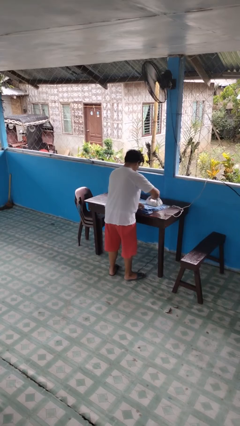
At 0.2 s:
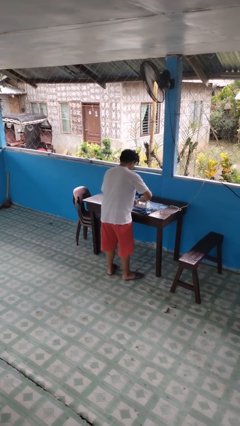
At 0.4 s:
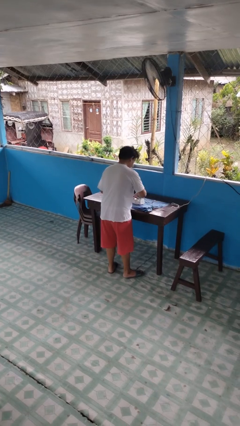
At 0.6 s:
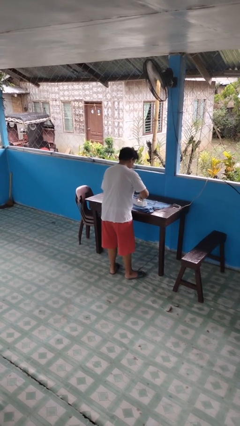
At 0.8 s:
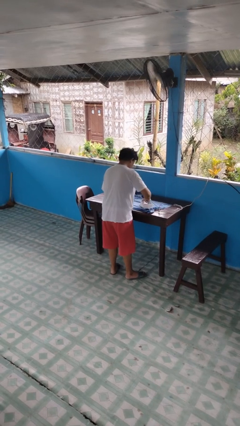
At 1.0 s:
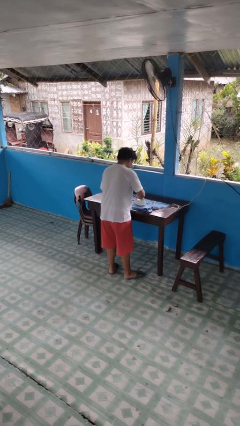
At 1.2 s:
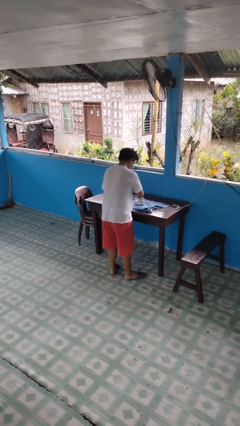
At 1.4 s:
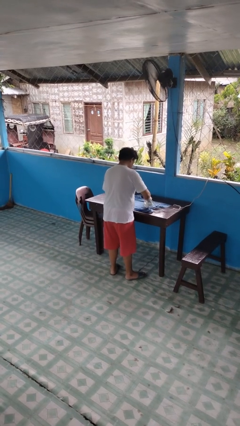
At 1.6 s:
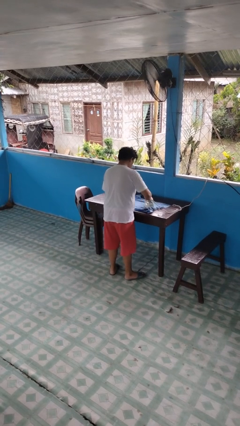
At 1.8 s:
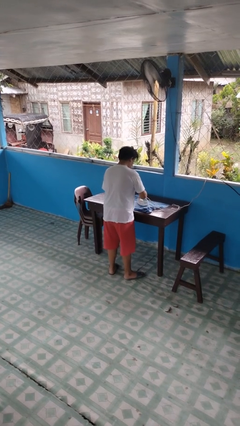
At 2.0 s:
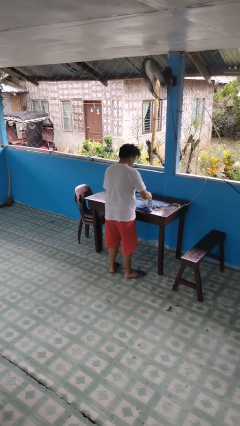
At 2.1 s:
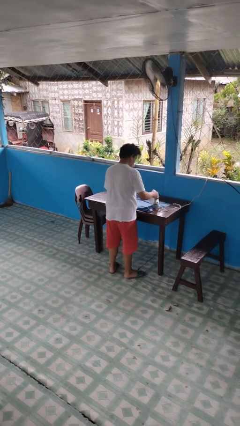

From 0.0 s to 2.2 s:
person irons clothes

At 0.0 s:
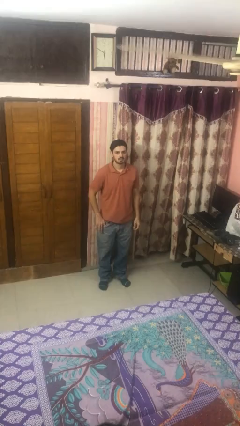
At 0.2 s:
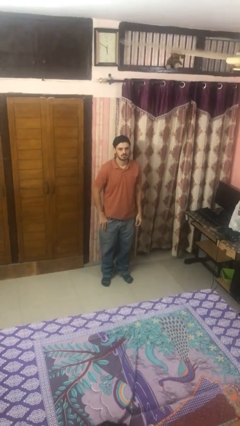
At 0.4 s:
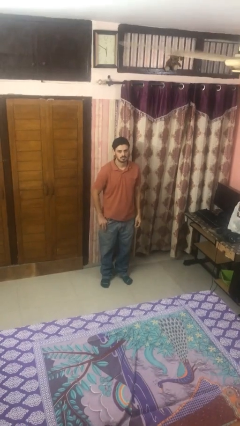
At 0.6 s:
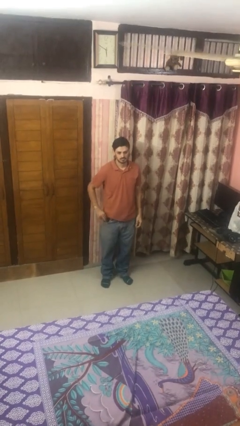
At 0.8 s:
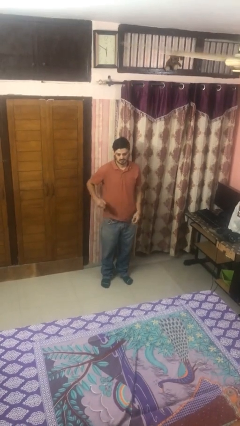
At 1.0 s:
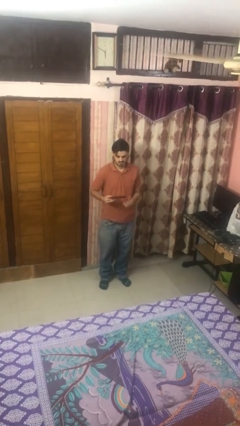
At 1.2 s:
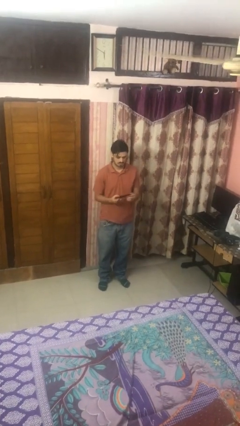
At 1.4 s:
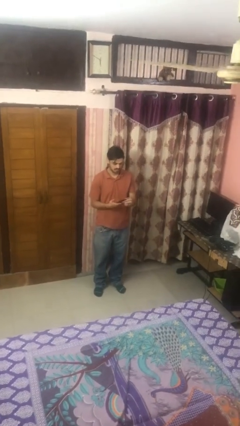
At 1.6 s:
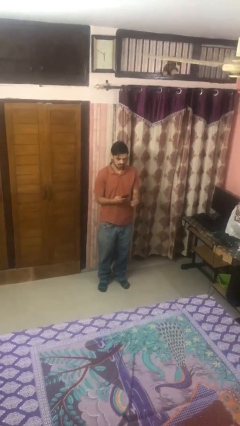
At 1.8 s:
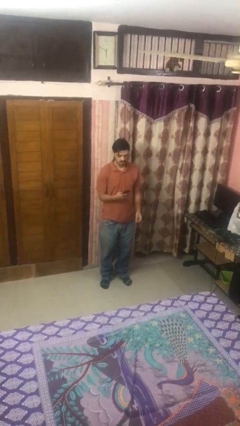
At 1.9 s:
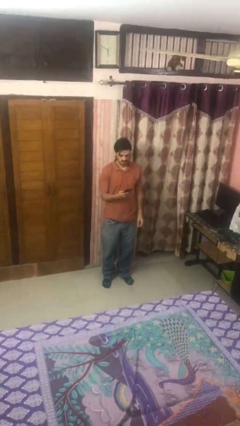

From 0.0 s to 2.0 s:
person takes phone from pocket

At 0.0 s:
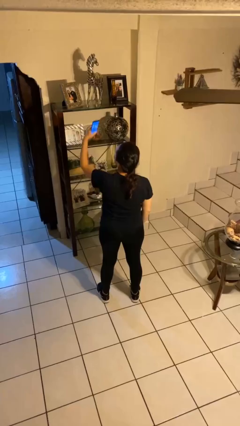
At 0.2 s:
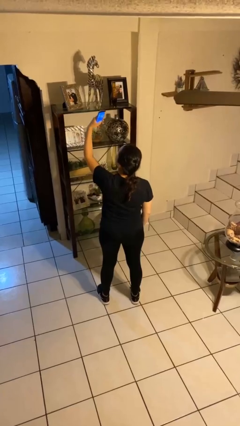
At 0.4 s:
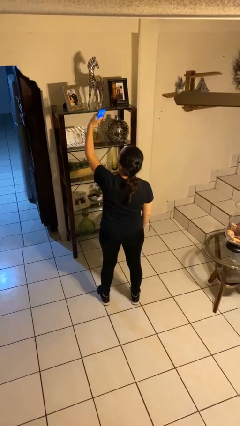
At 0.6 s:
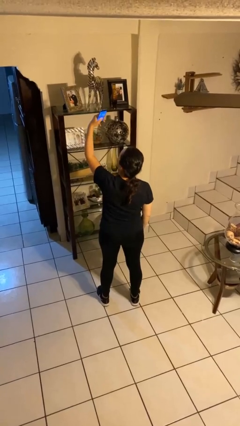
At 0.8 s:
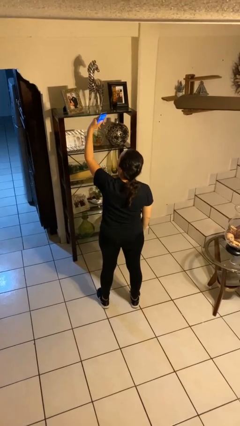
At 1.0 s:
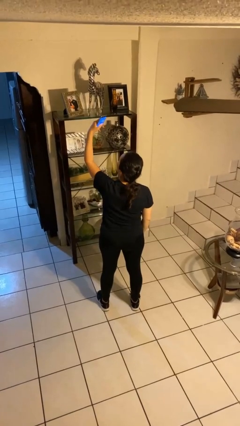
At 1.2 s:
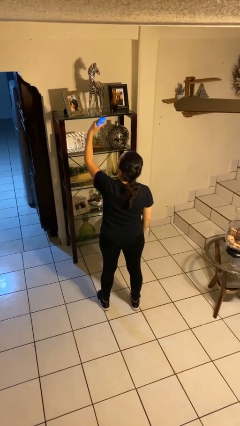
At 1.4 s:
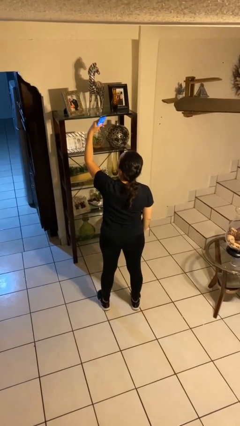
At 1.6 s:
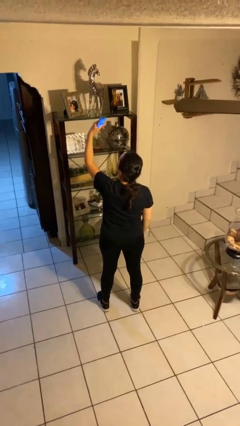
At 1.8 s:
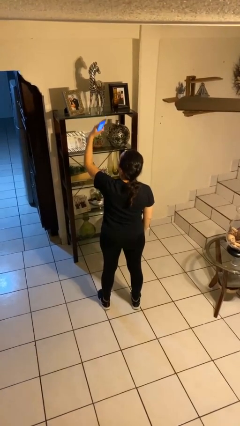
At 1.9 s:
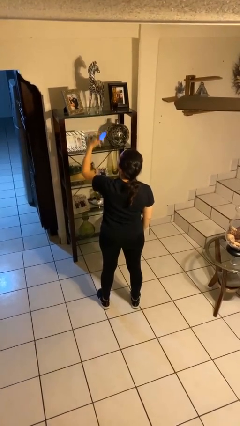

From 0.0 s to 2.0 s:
person takes selfie

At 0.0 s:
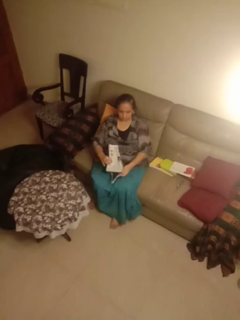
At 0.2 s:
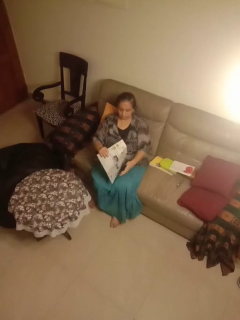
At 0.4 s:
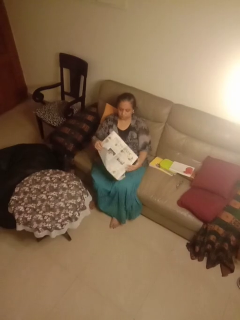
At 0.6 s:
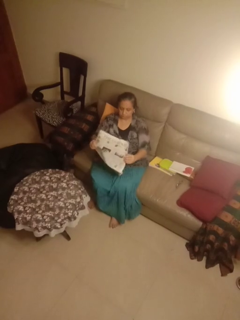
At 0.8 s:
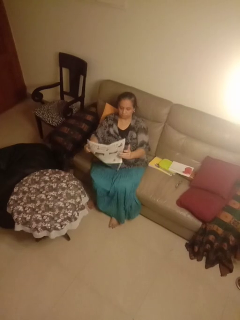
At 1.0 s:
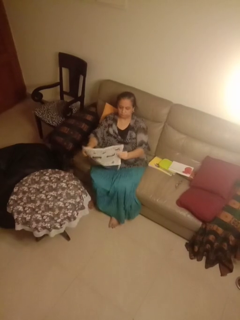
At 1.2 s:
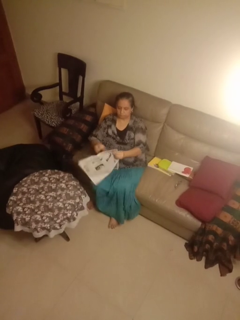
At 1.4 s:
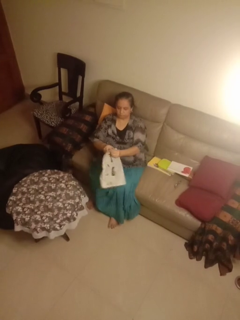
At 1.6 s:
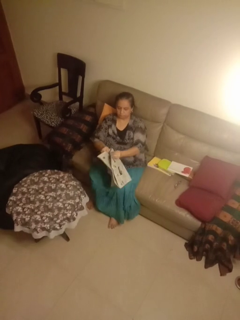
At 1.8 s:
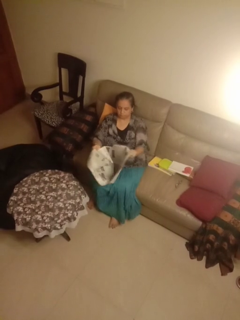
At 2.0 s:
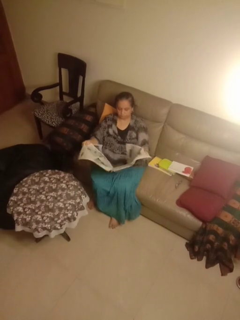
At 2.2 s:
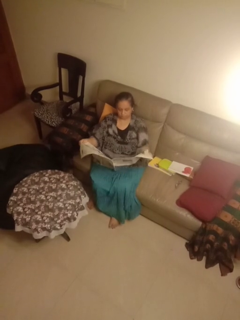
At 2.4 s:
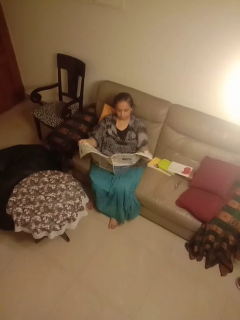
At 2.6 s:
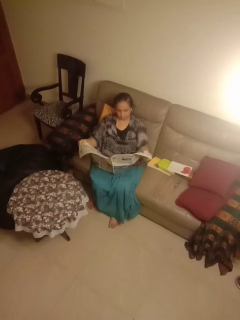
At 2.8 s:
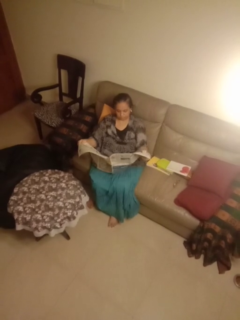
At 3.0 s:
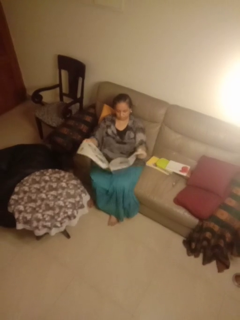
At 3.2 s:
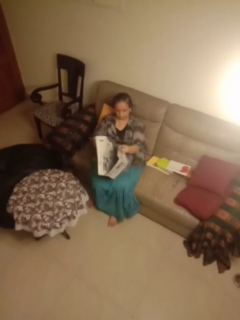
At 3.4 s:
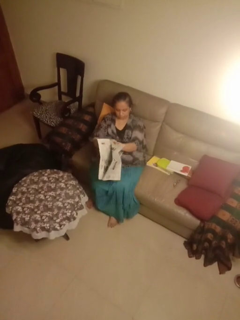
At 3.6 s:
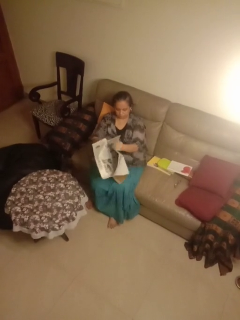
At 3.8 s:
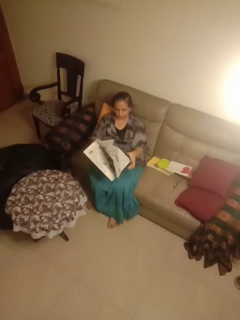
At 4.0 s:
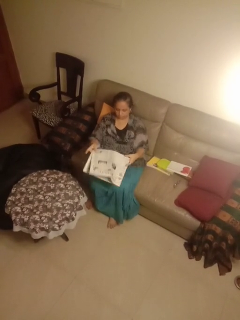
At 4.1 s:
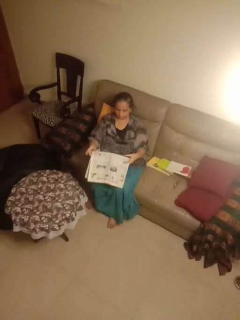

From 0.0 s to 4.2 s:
person reads newspaper

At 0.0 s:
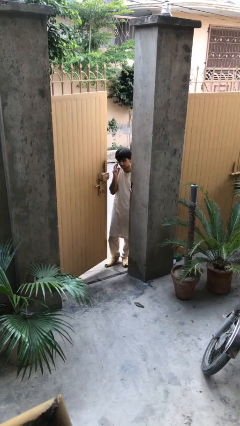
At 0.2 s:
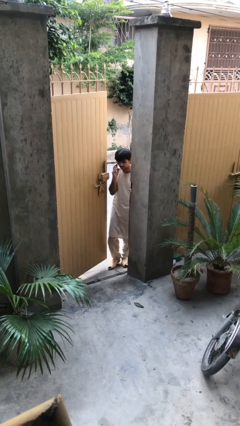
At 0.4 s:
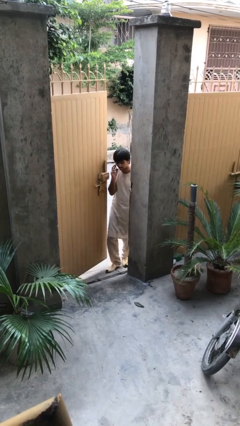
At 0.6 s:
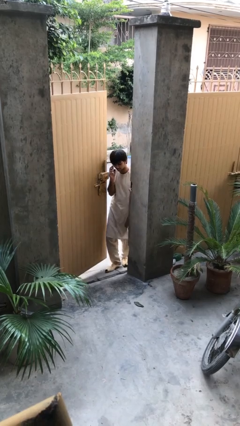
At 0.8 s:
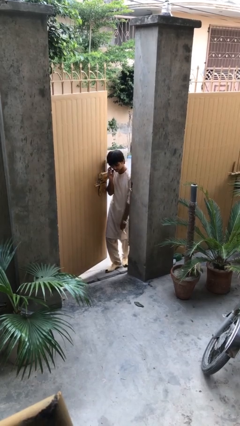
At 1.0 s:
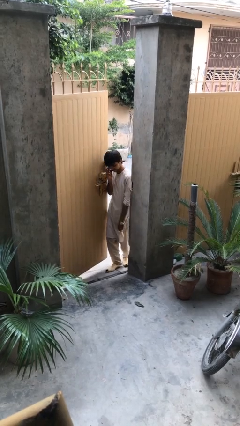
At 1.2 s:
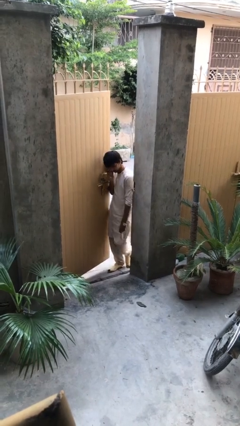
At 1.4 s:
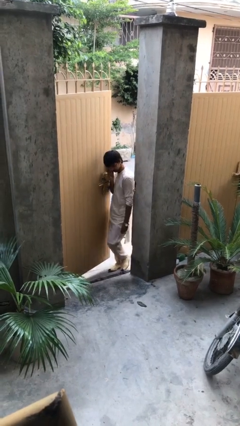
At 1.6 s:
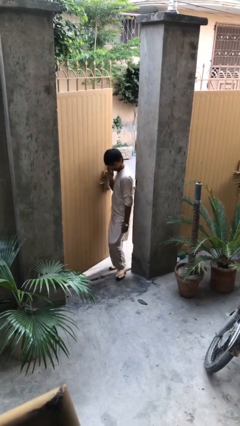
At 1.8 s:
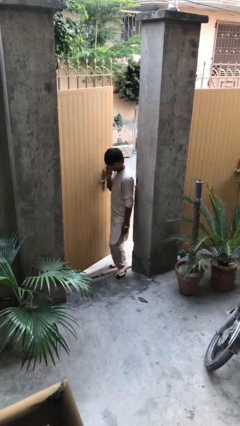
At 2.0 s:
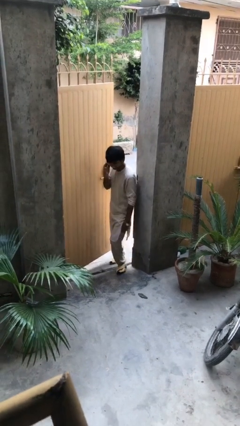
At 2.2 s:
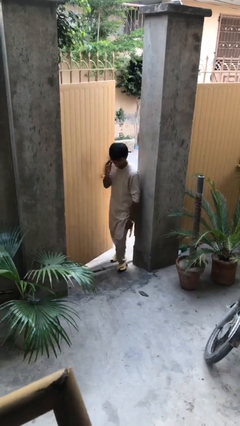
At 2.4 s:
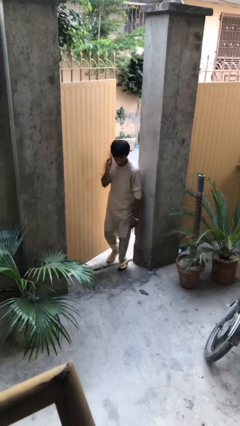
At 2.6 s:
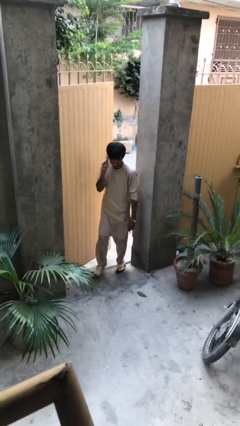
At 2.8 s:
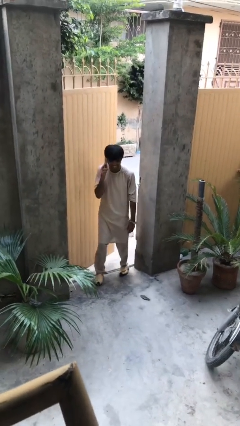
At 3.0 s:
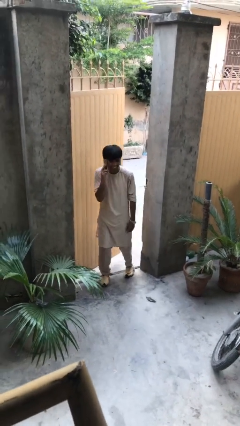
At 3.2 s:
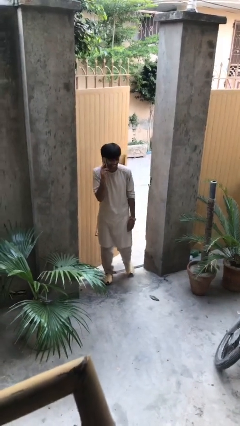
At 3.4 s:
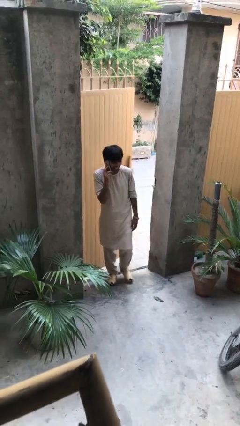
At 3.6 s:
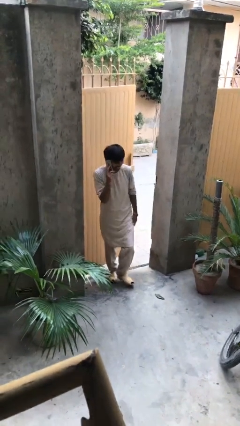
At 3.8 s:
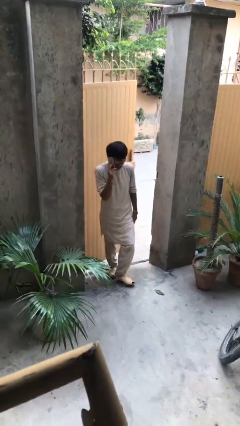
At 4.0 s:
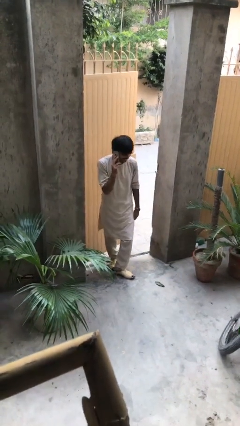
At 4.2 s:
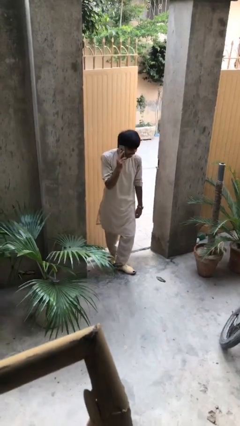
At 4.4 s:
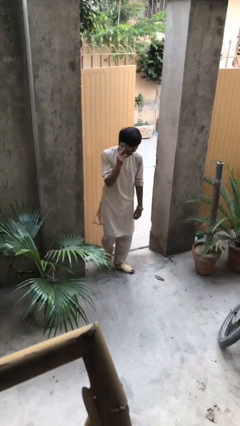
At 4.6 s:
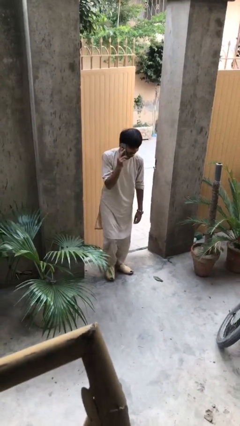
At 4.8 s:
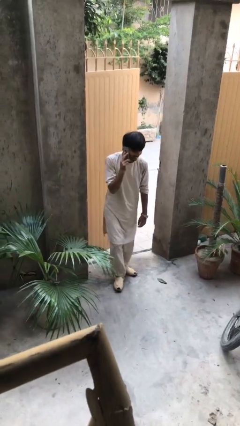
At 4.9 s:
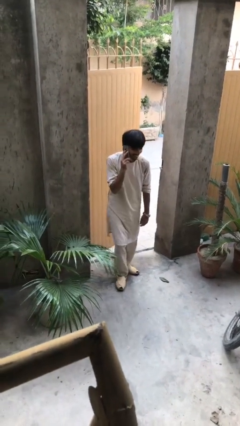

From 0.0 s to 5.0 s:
person enters scene through structure

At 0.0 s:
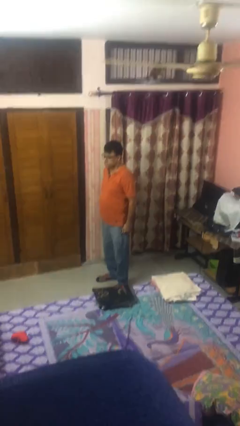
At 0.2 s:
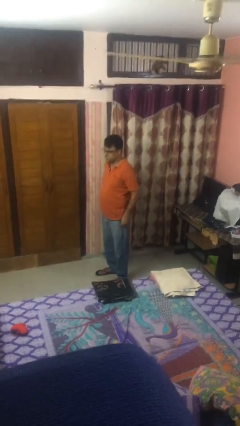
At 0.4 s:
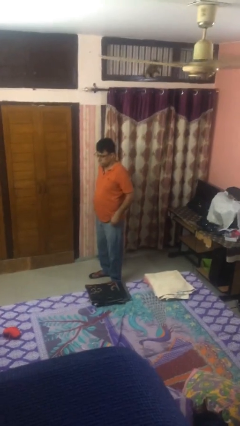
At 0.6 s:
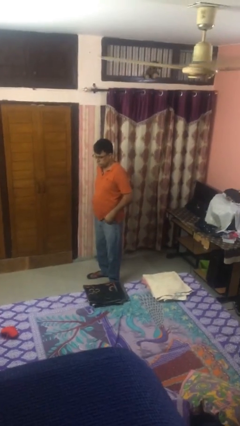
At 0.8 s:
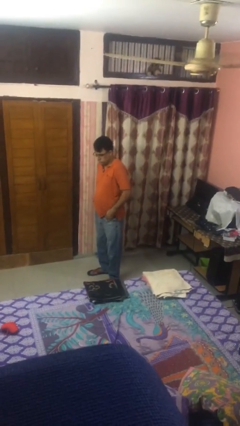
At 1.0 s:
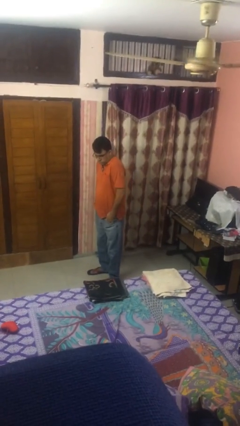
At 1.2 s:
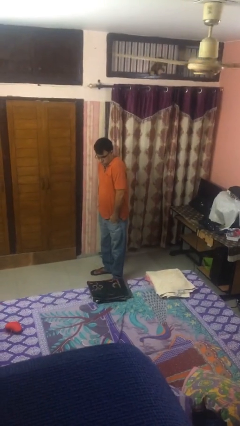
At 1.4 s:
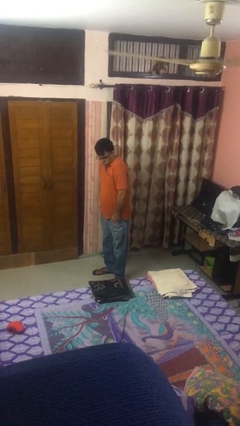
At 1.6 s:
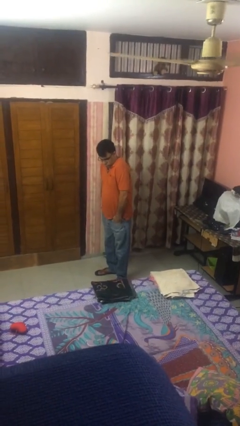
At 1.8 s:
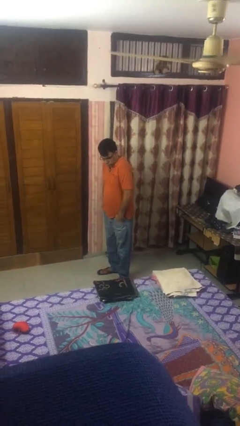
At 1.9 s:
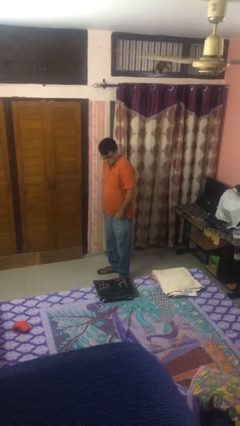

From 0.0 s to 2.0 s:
person puts hands in back pockets

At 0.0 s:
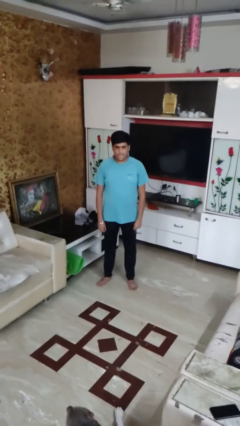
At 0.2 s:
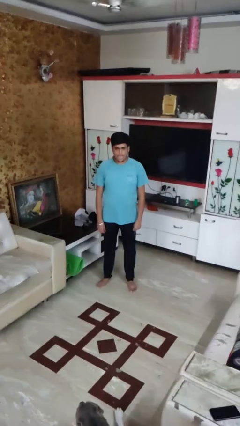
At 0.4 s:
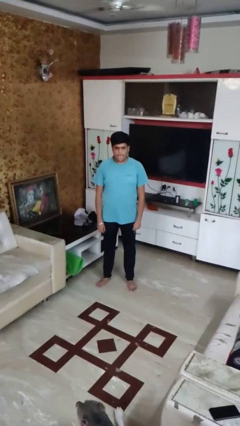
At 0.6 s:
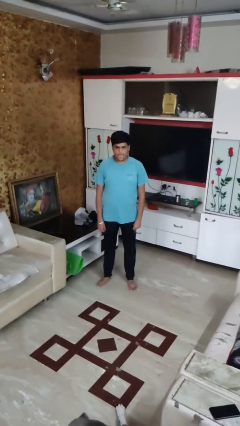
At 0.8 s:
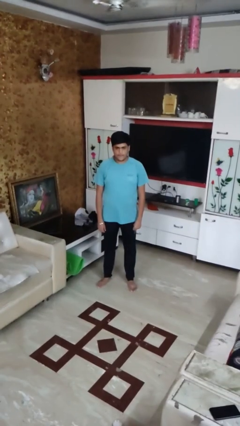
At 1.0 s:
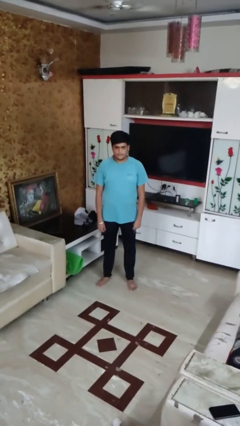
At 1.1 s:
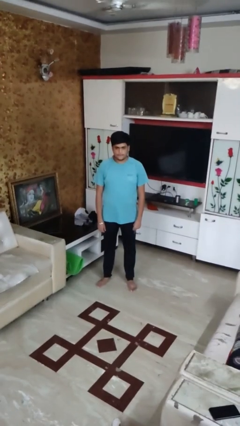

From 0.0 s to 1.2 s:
person sticks out tongue
